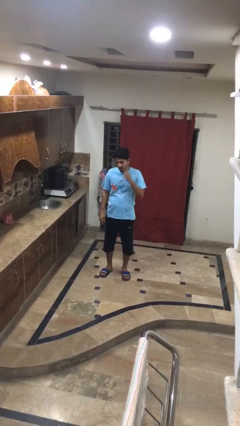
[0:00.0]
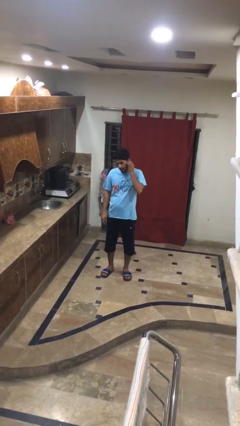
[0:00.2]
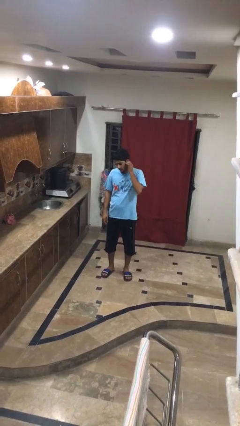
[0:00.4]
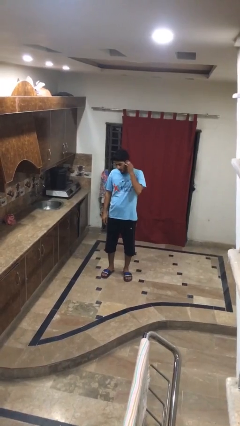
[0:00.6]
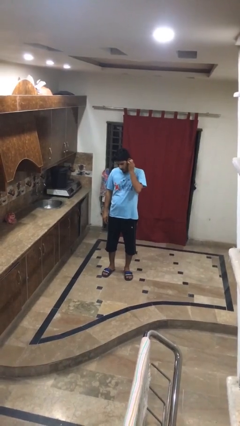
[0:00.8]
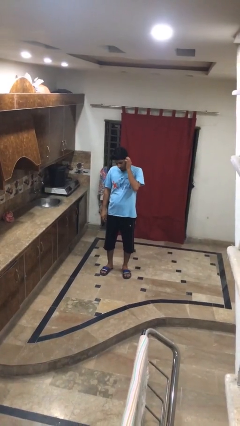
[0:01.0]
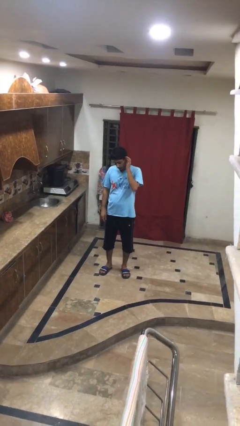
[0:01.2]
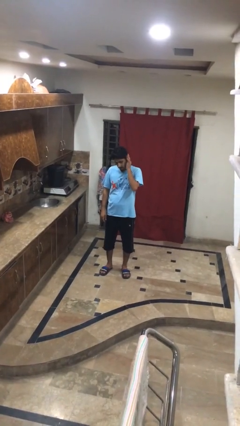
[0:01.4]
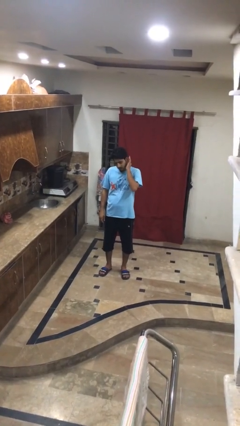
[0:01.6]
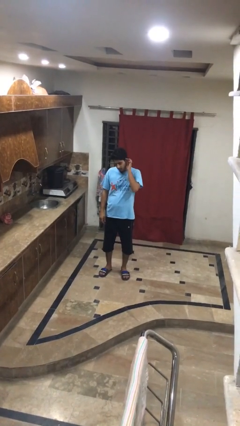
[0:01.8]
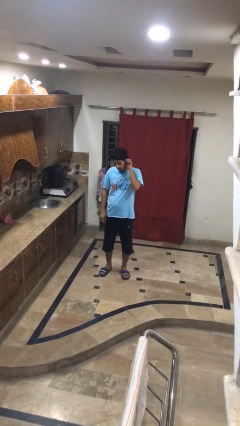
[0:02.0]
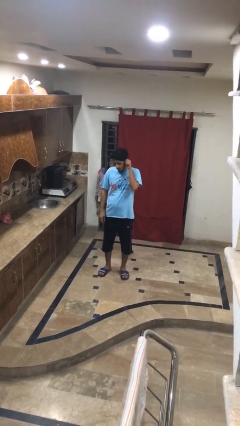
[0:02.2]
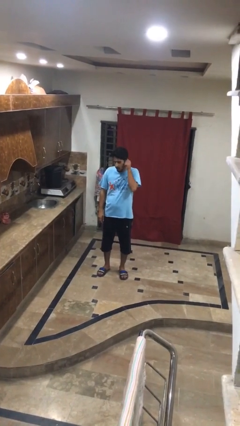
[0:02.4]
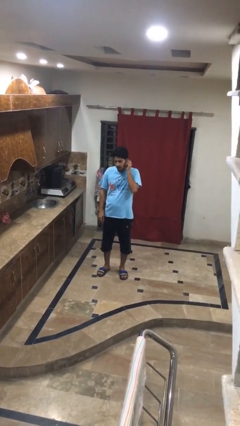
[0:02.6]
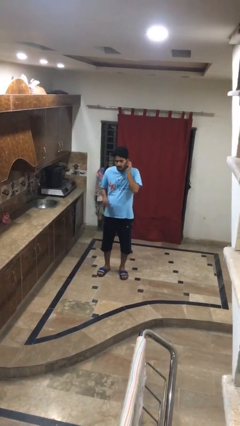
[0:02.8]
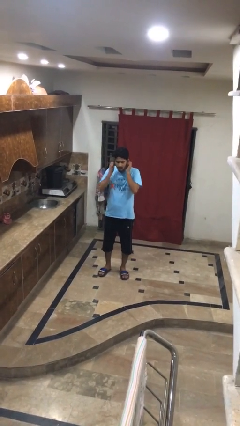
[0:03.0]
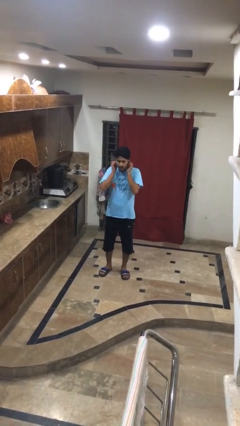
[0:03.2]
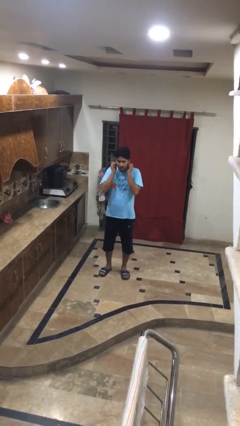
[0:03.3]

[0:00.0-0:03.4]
person touches earlobe

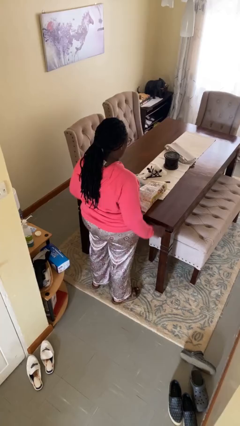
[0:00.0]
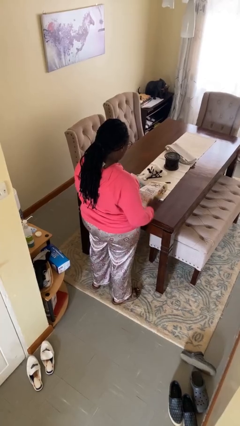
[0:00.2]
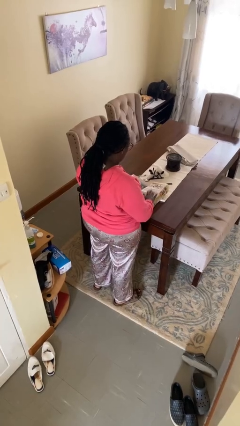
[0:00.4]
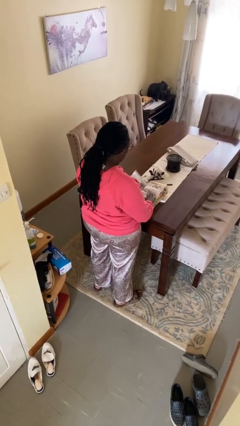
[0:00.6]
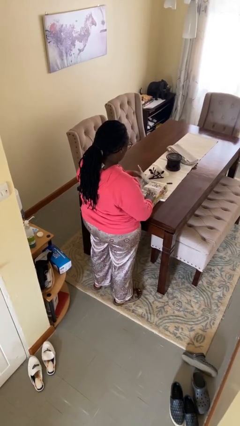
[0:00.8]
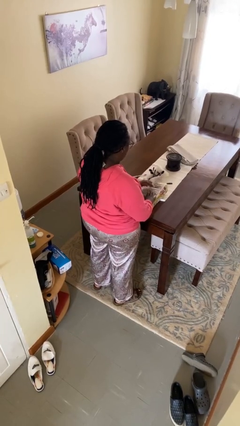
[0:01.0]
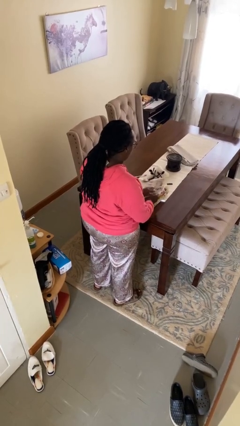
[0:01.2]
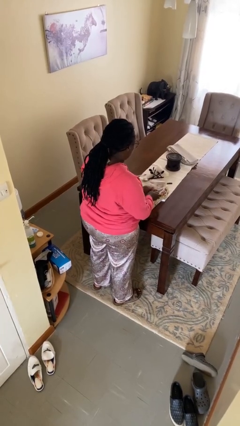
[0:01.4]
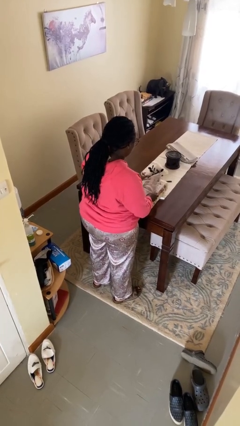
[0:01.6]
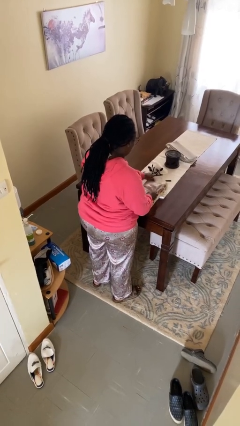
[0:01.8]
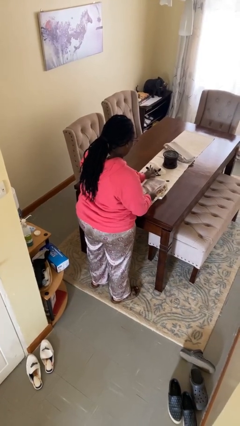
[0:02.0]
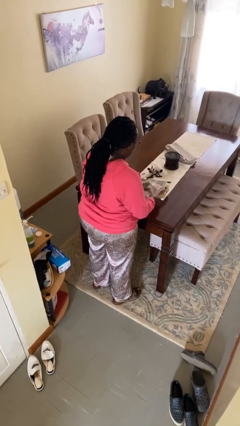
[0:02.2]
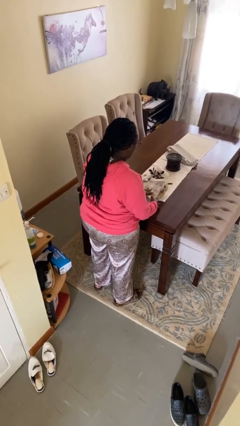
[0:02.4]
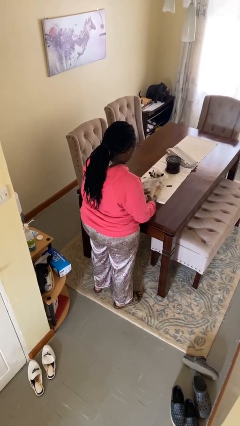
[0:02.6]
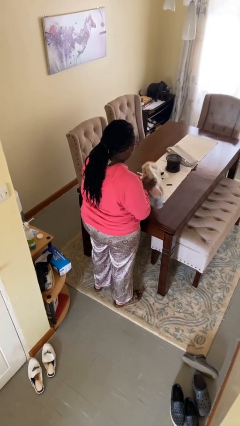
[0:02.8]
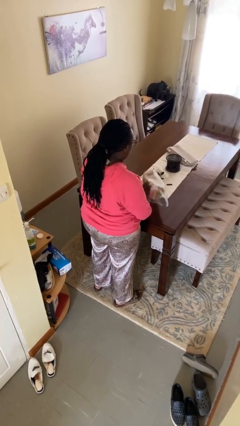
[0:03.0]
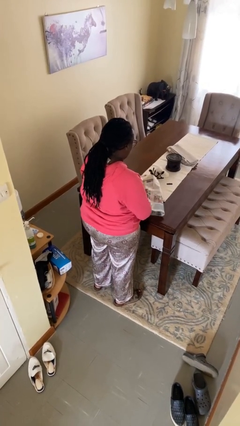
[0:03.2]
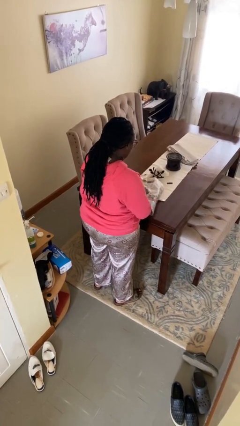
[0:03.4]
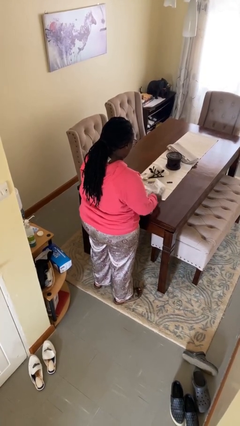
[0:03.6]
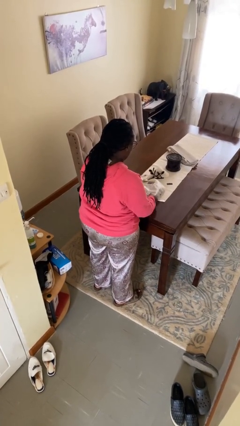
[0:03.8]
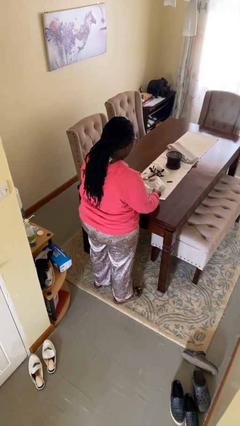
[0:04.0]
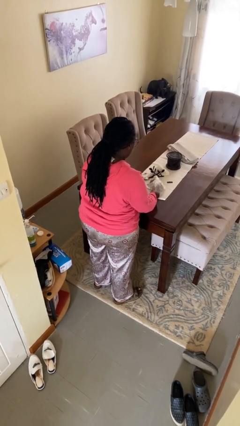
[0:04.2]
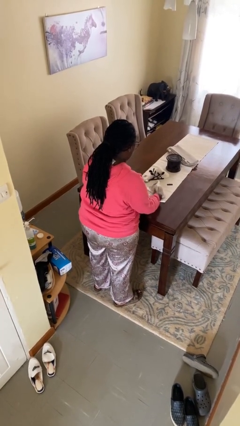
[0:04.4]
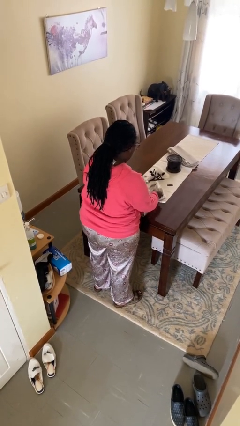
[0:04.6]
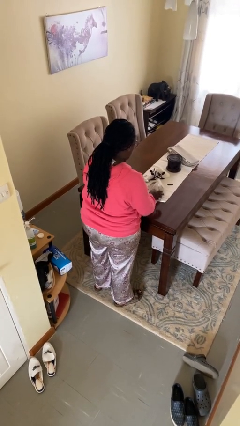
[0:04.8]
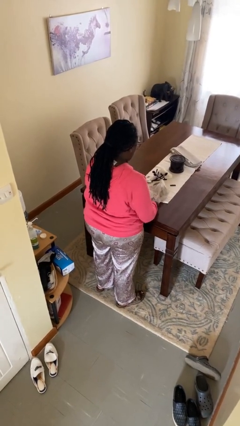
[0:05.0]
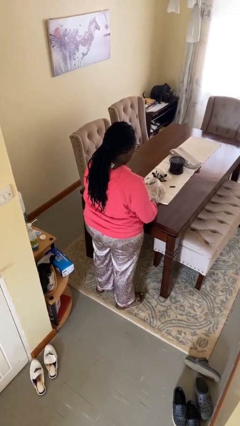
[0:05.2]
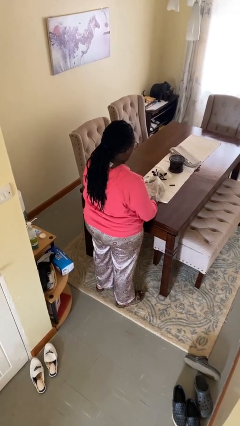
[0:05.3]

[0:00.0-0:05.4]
person wraps box

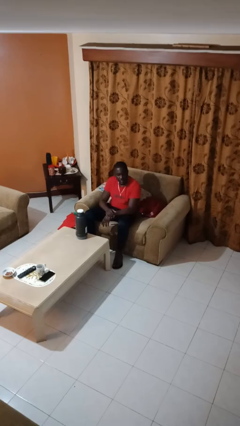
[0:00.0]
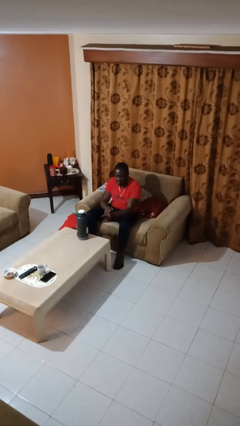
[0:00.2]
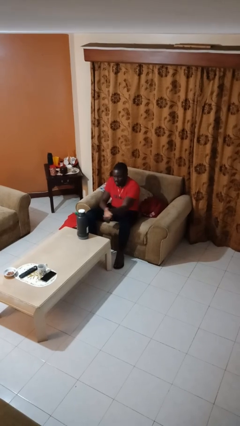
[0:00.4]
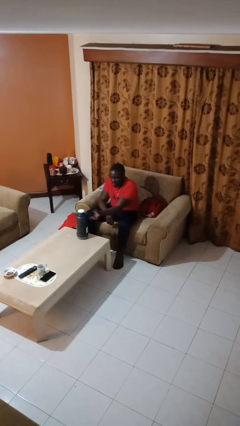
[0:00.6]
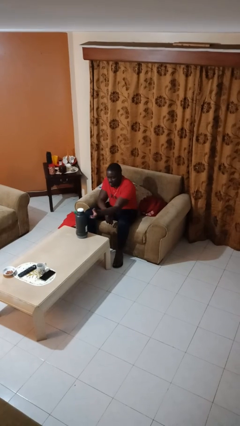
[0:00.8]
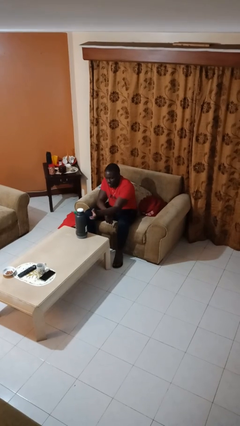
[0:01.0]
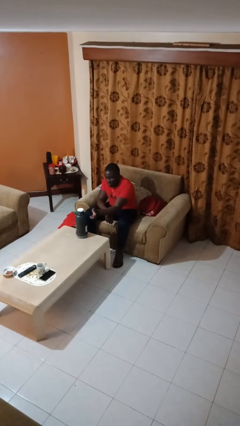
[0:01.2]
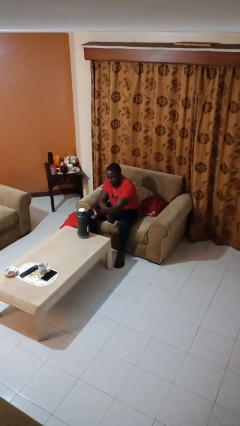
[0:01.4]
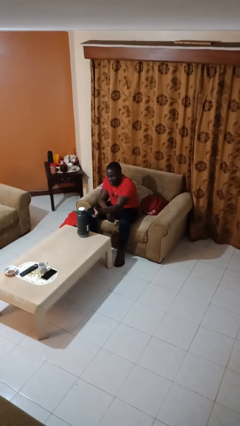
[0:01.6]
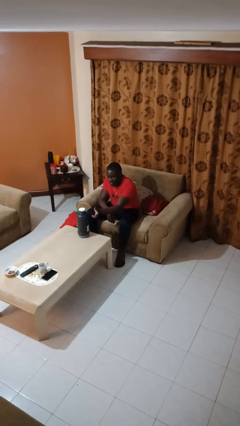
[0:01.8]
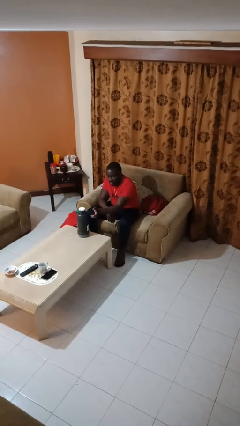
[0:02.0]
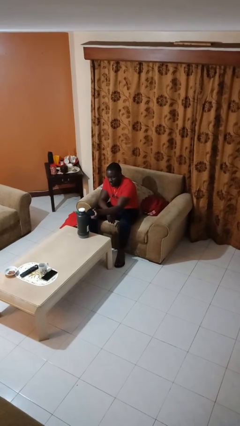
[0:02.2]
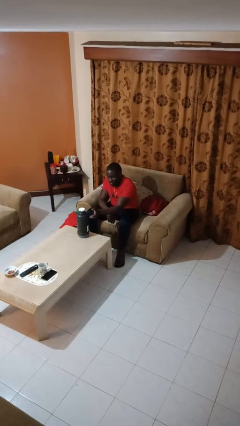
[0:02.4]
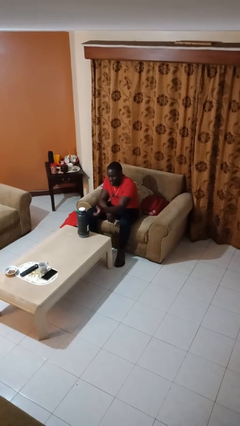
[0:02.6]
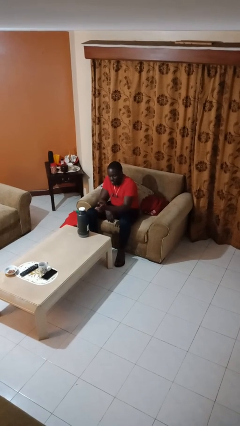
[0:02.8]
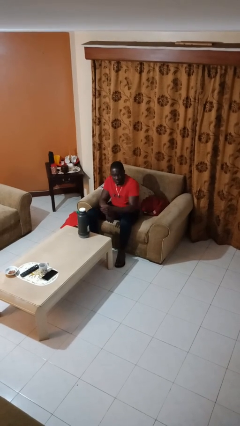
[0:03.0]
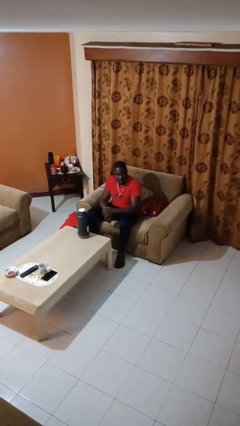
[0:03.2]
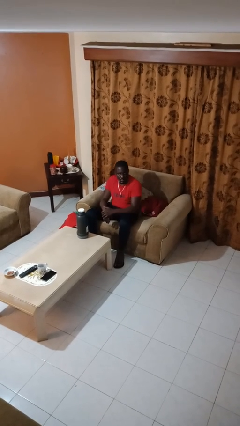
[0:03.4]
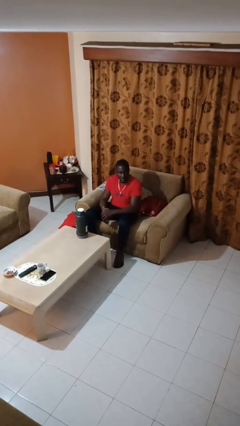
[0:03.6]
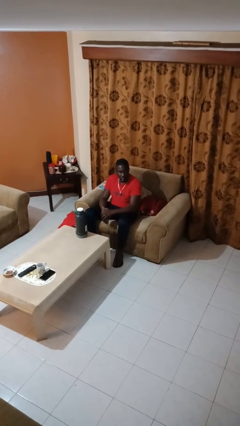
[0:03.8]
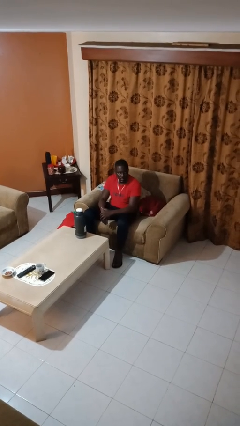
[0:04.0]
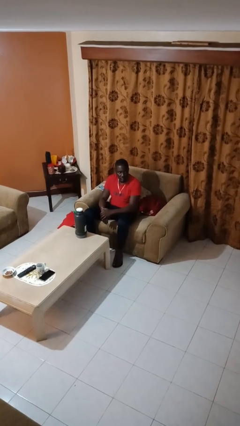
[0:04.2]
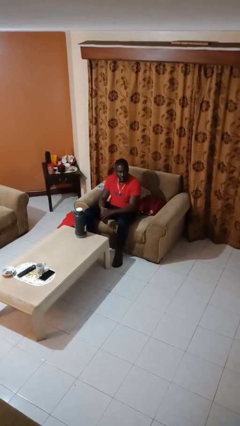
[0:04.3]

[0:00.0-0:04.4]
person taps object with finger

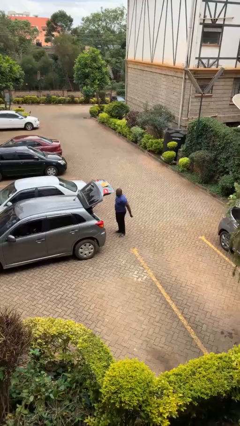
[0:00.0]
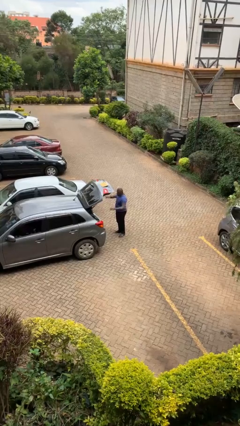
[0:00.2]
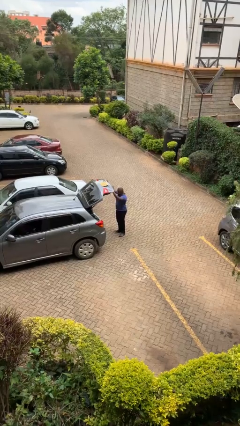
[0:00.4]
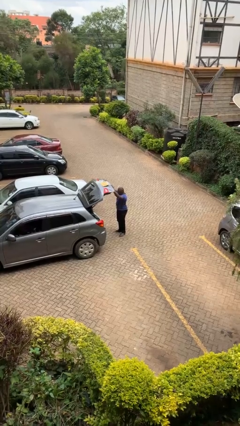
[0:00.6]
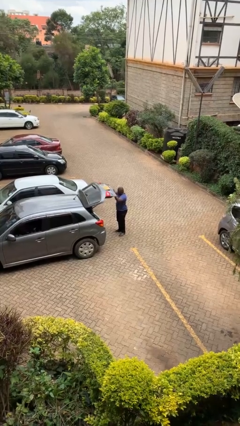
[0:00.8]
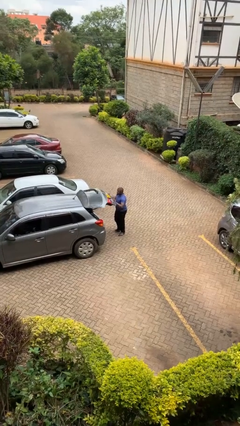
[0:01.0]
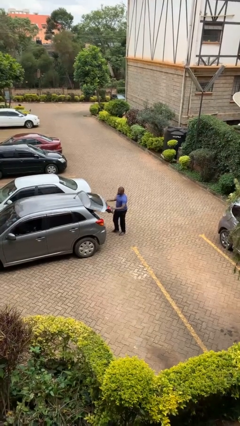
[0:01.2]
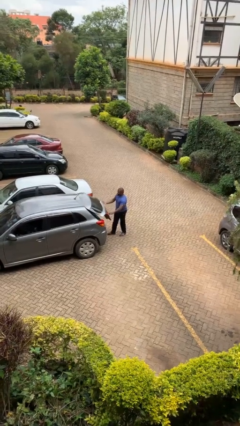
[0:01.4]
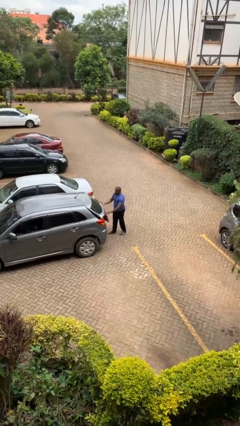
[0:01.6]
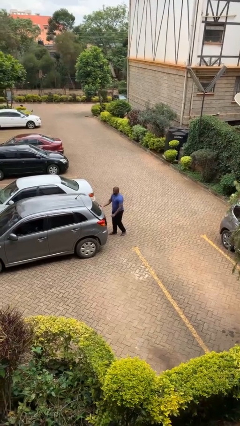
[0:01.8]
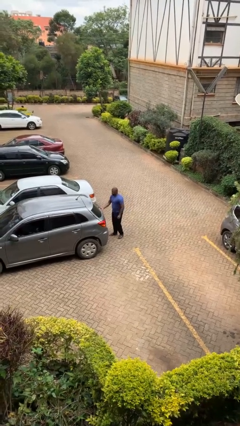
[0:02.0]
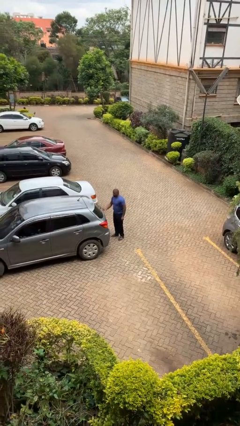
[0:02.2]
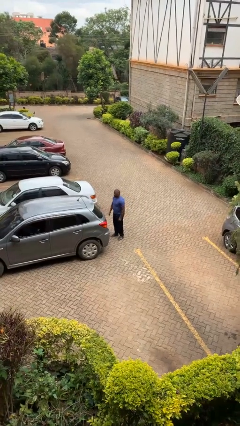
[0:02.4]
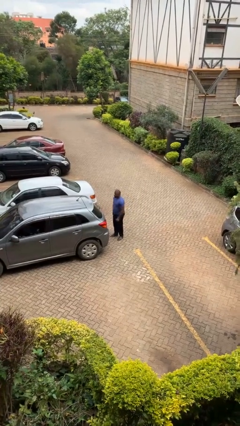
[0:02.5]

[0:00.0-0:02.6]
person closes car trunk

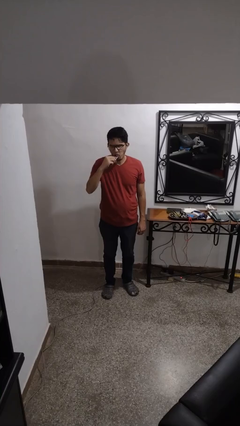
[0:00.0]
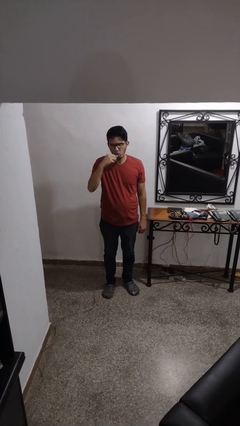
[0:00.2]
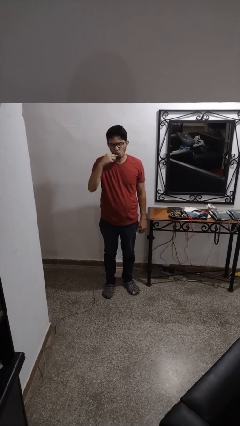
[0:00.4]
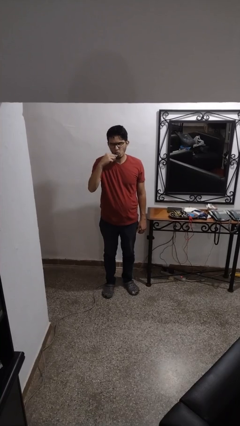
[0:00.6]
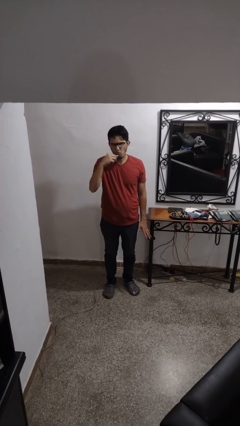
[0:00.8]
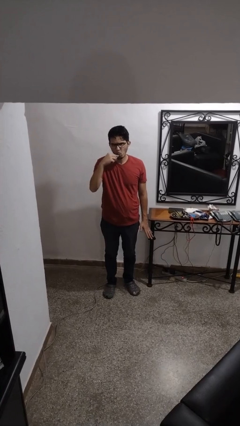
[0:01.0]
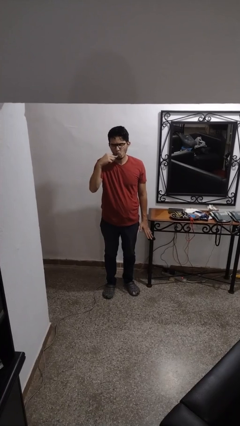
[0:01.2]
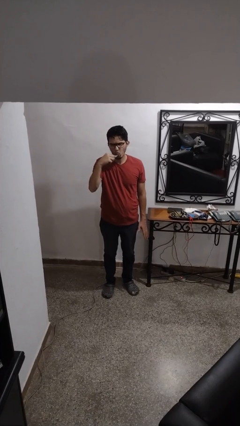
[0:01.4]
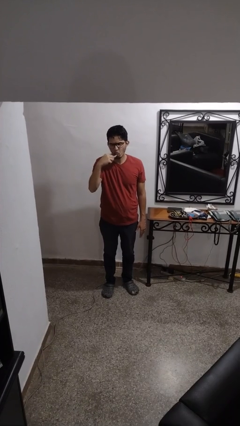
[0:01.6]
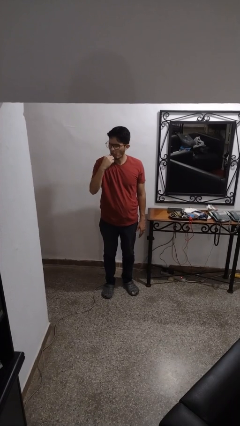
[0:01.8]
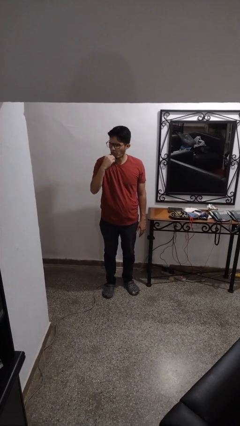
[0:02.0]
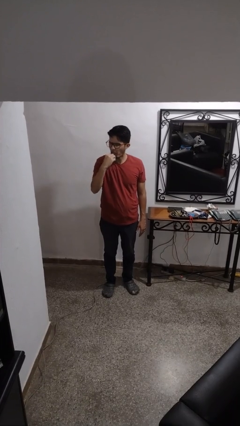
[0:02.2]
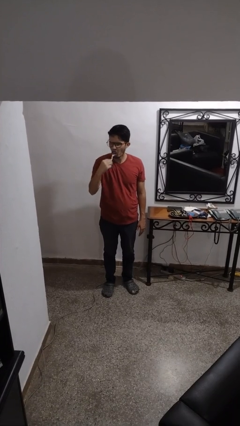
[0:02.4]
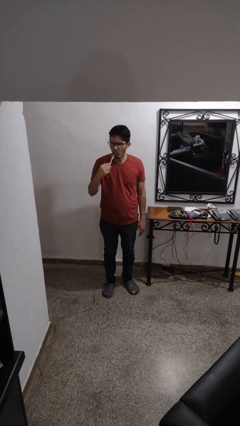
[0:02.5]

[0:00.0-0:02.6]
person brushes teeth
